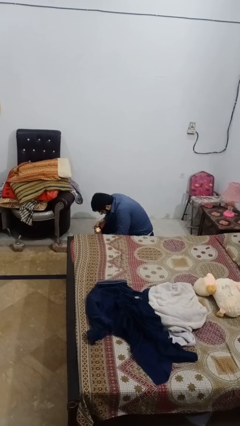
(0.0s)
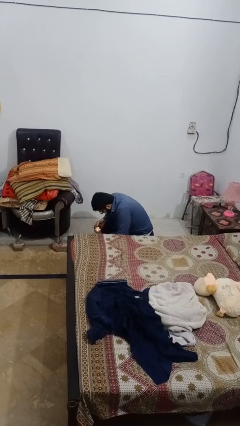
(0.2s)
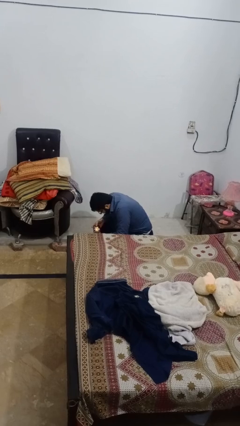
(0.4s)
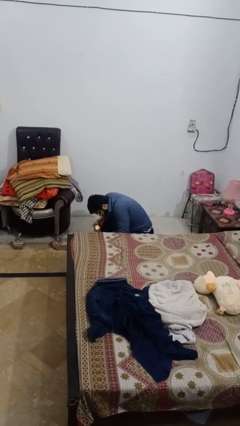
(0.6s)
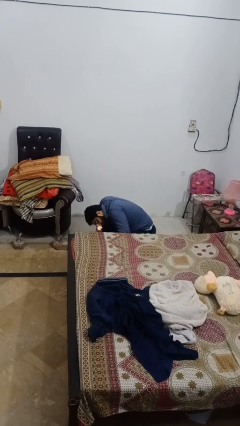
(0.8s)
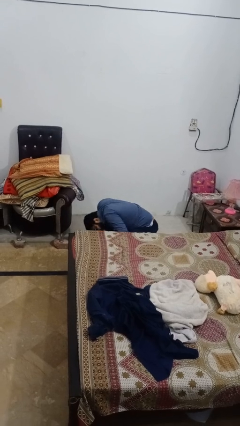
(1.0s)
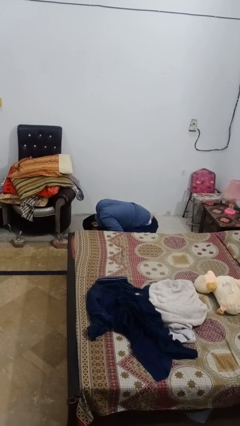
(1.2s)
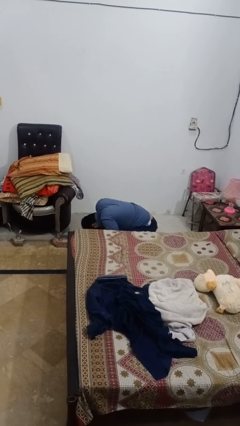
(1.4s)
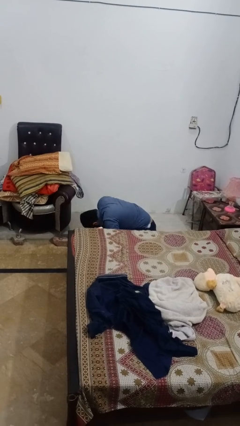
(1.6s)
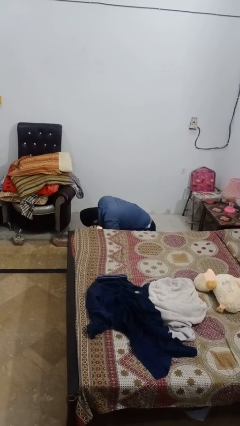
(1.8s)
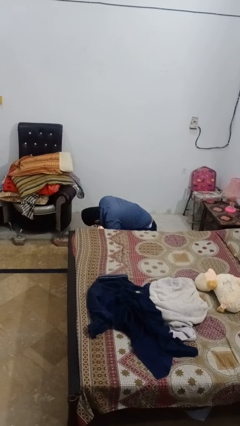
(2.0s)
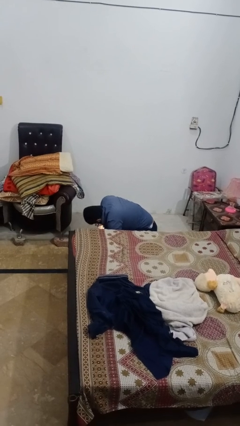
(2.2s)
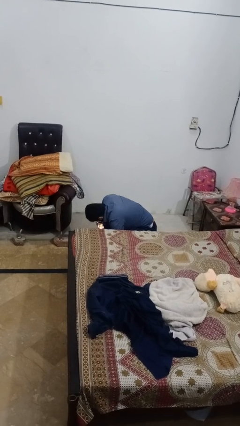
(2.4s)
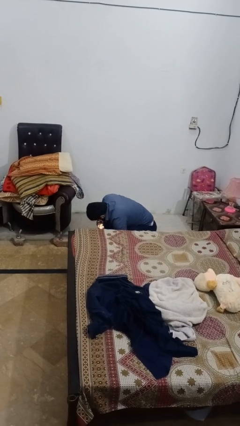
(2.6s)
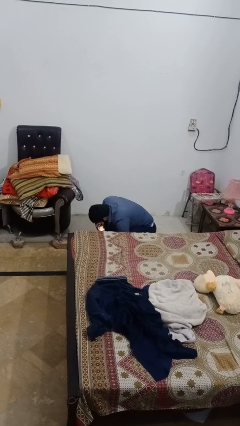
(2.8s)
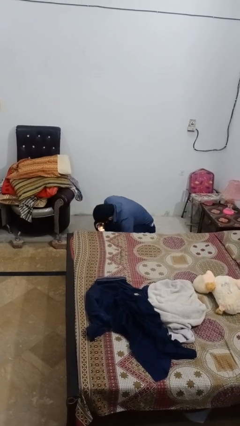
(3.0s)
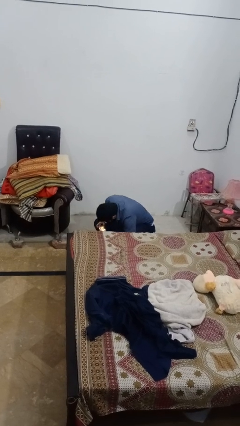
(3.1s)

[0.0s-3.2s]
person searches under bed

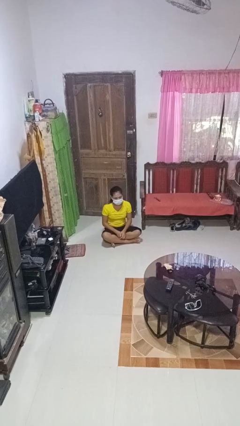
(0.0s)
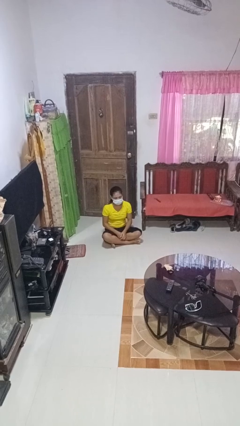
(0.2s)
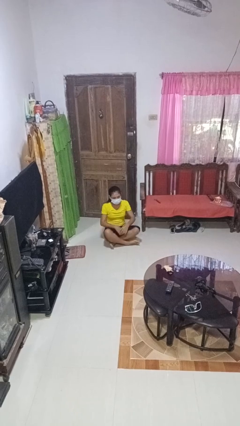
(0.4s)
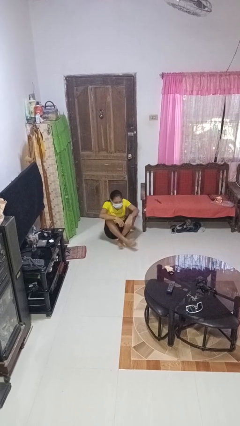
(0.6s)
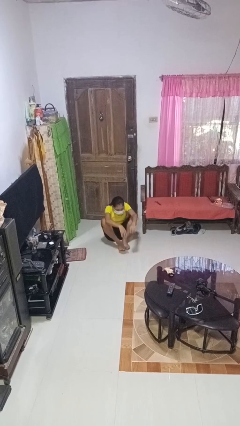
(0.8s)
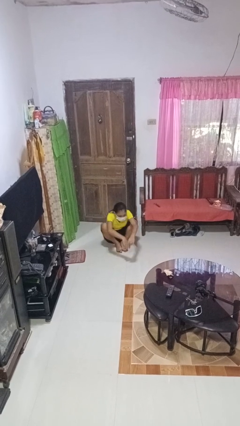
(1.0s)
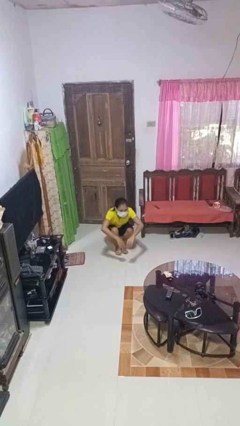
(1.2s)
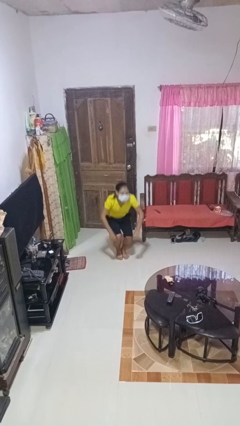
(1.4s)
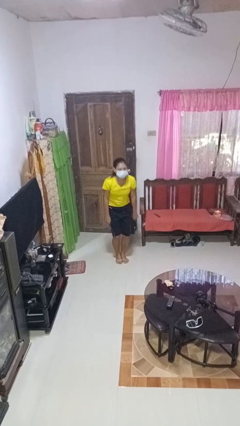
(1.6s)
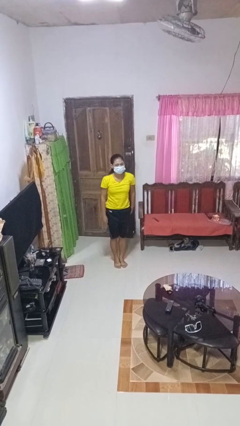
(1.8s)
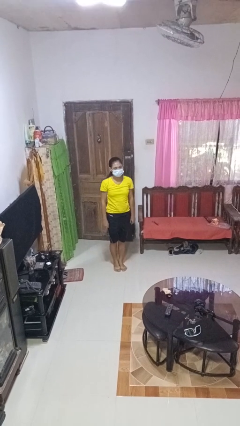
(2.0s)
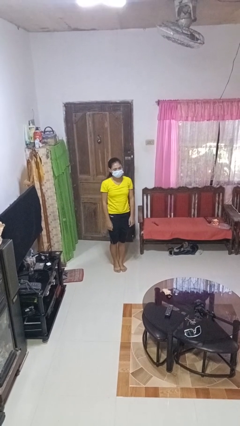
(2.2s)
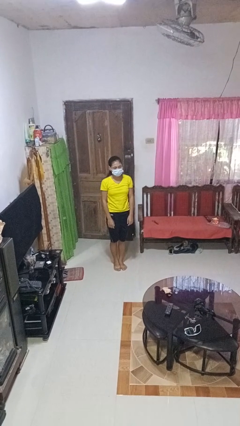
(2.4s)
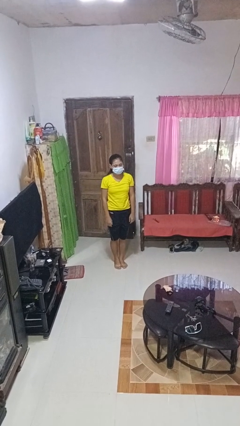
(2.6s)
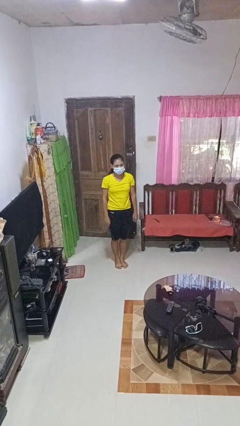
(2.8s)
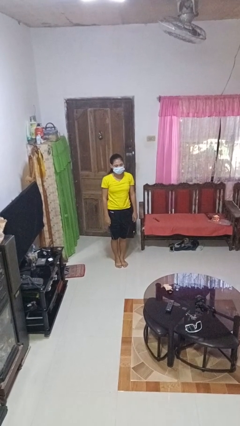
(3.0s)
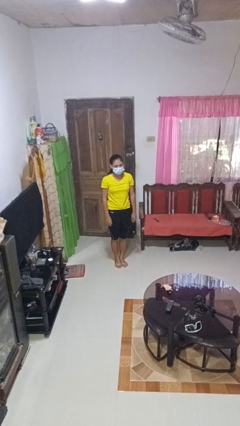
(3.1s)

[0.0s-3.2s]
person stands up from floor

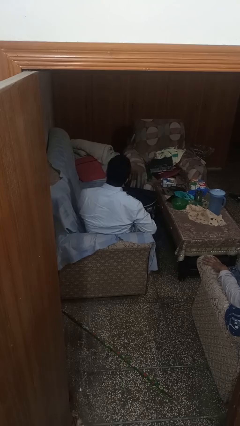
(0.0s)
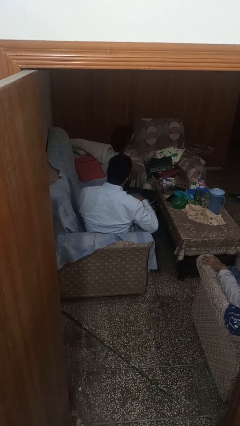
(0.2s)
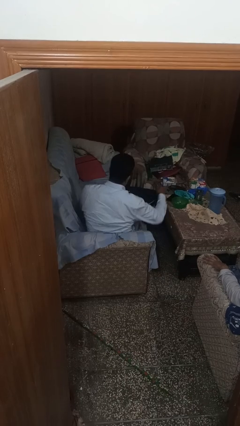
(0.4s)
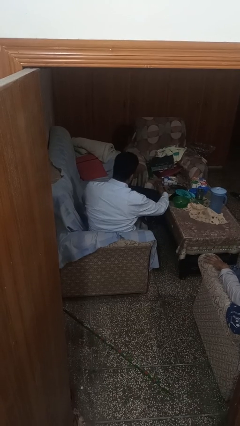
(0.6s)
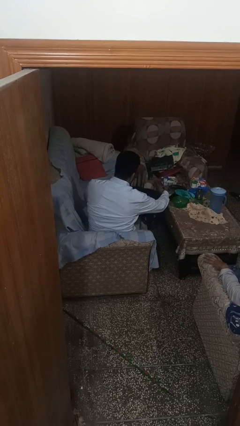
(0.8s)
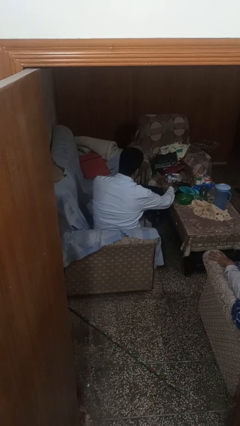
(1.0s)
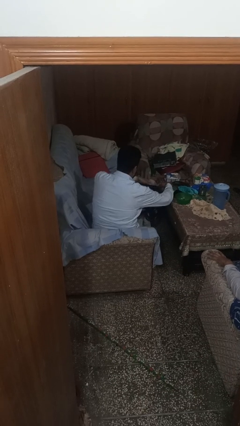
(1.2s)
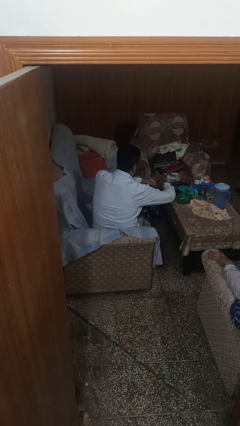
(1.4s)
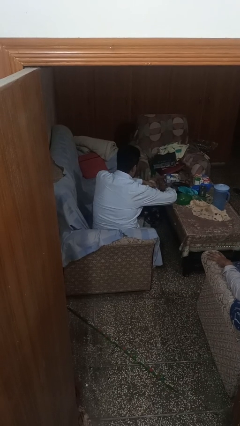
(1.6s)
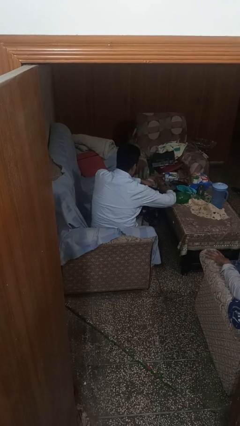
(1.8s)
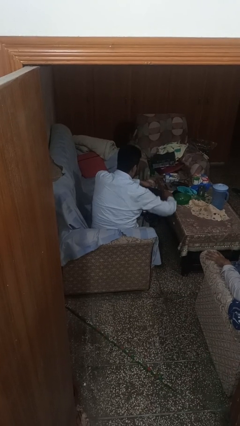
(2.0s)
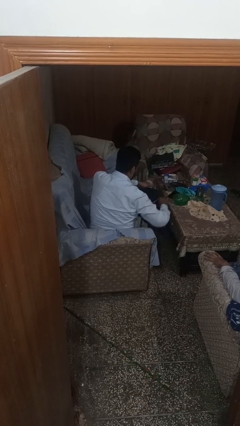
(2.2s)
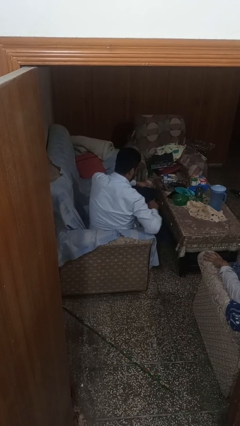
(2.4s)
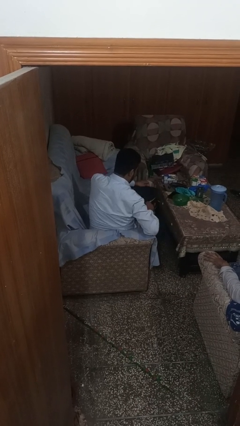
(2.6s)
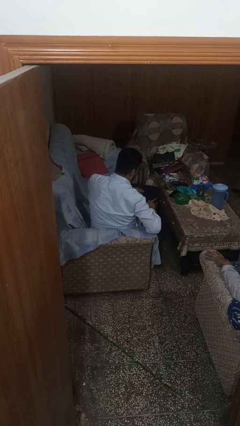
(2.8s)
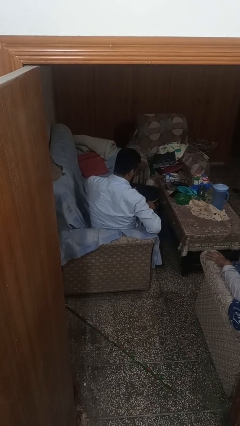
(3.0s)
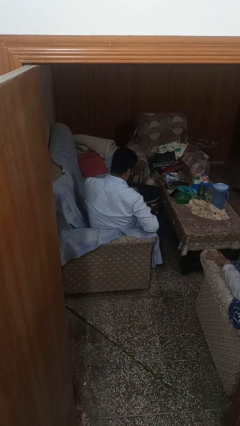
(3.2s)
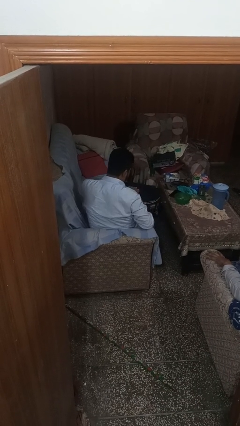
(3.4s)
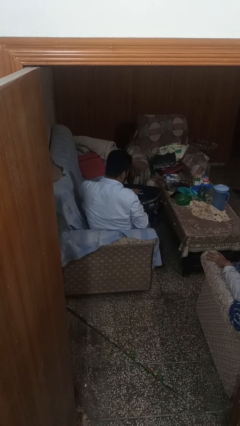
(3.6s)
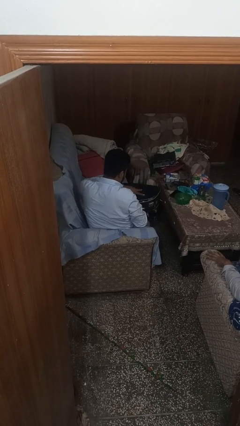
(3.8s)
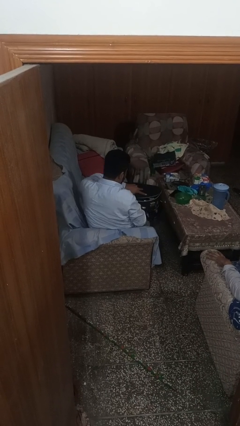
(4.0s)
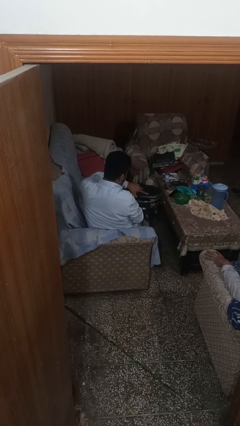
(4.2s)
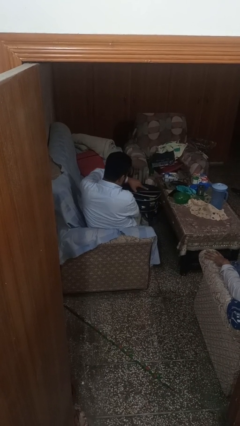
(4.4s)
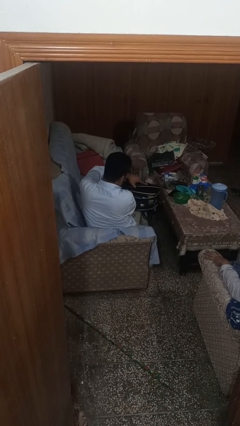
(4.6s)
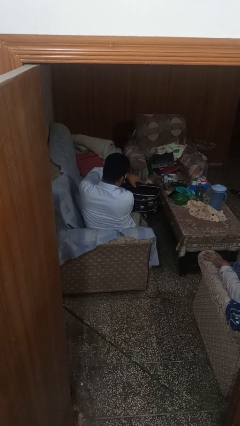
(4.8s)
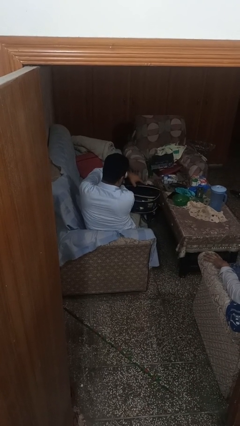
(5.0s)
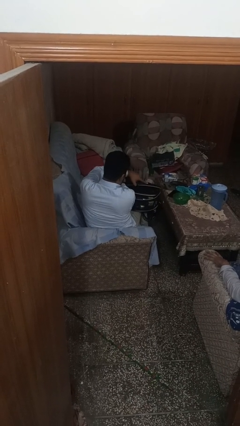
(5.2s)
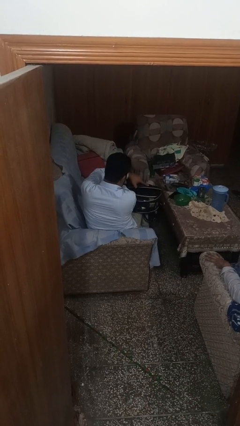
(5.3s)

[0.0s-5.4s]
person opens suitcase

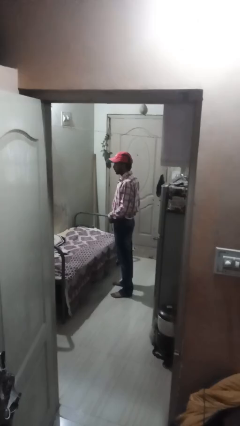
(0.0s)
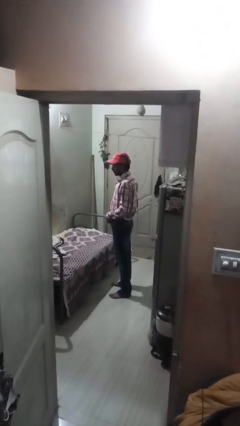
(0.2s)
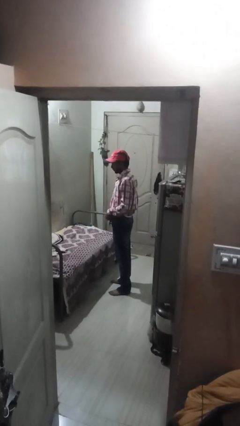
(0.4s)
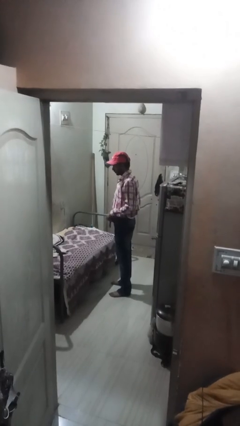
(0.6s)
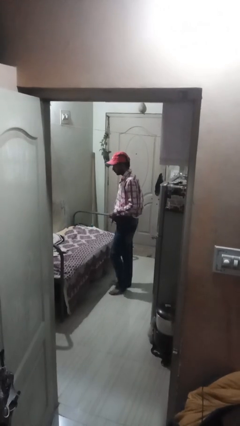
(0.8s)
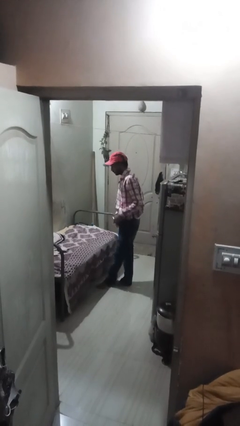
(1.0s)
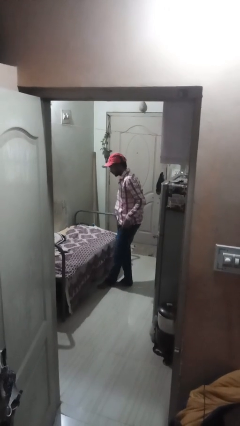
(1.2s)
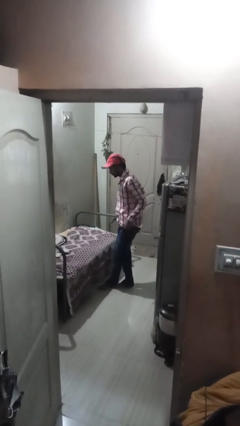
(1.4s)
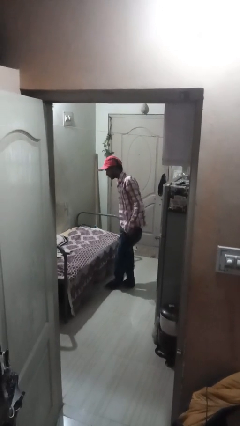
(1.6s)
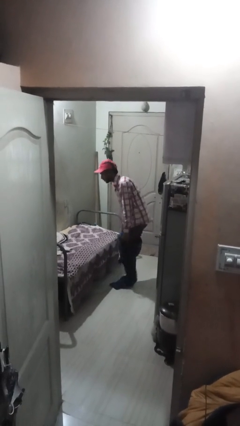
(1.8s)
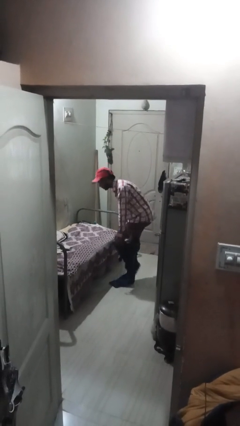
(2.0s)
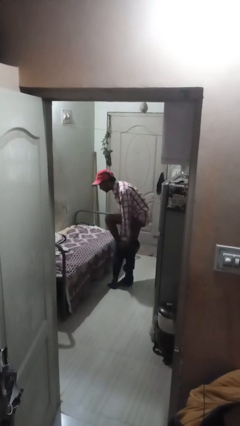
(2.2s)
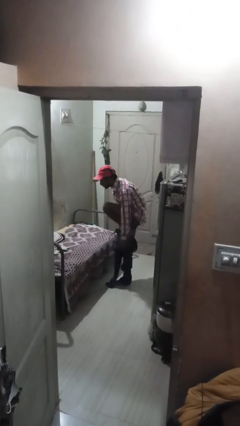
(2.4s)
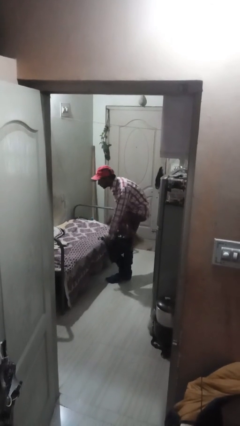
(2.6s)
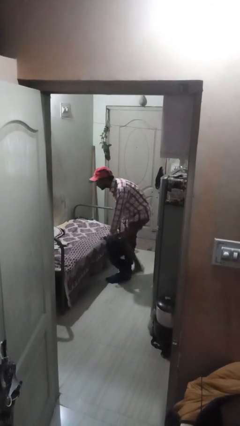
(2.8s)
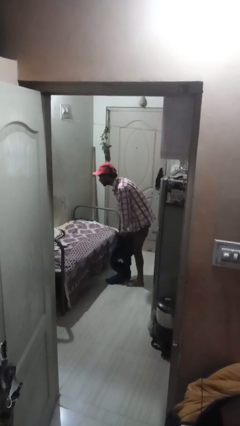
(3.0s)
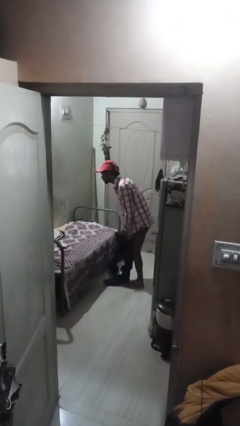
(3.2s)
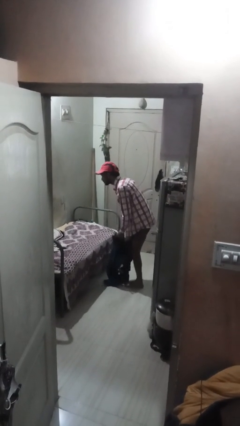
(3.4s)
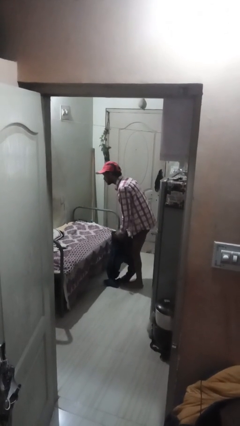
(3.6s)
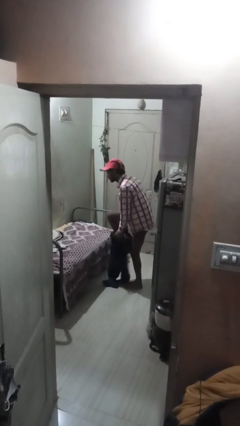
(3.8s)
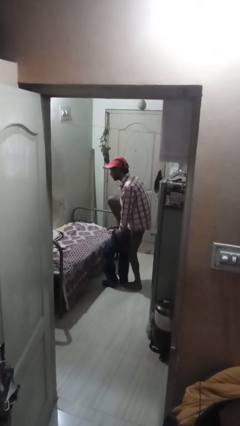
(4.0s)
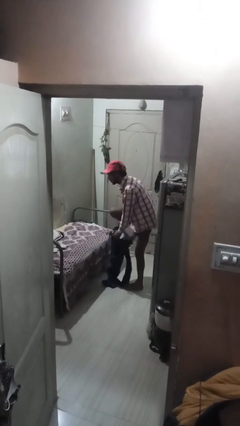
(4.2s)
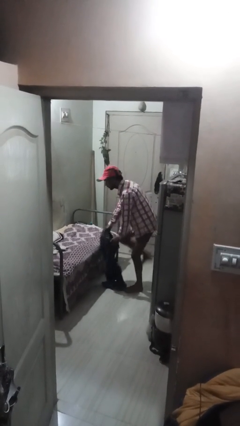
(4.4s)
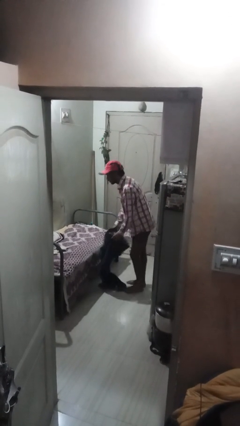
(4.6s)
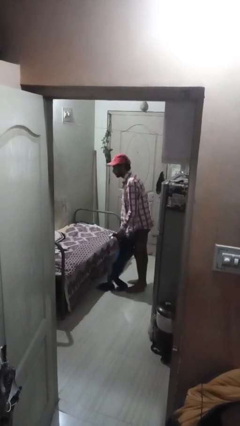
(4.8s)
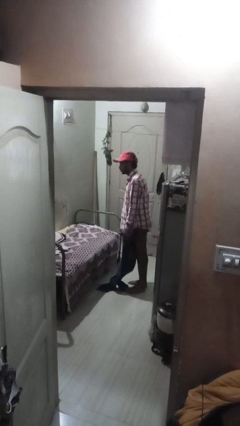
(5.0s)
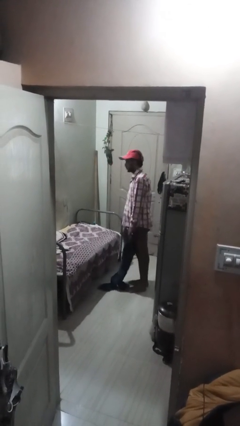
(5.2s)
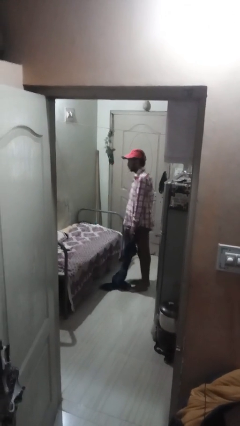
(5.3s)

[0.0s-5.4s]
person takes off pants

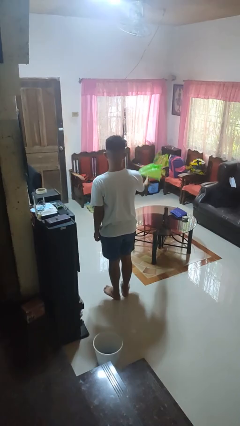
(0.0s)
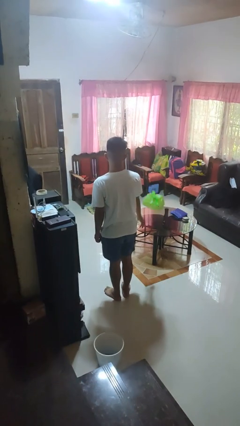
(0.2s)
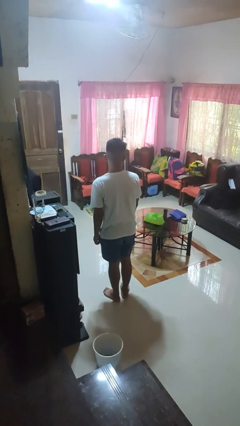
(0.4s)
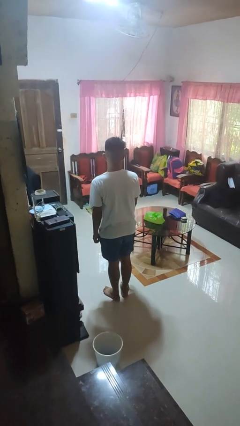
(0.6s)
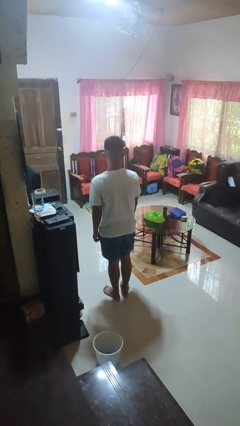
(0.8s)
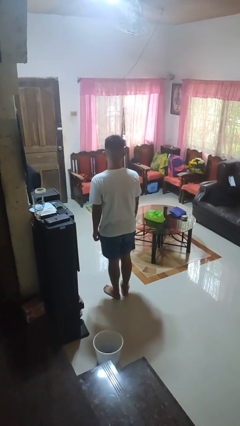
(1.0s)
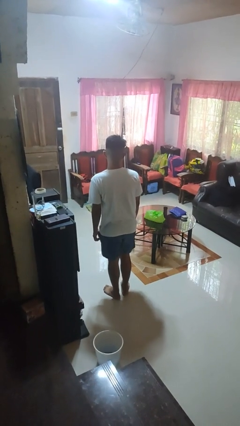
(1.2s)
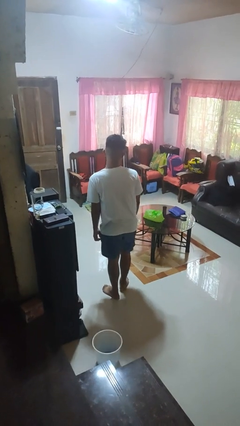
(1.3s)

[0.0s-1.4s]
person throws object on table
